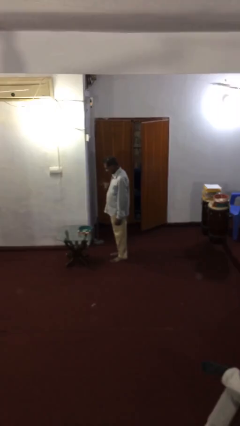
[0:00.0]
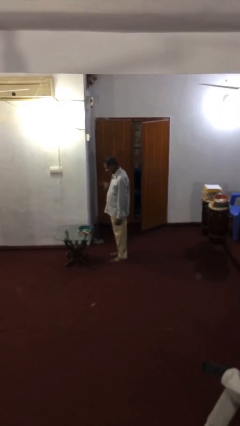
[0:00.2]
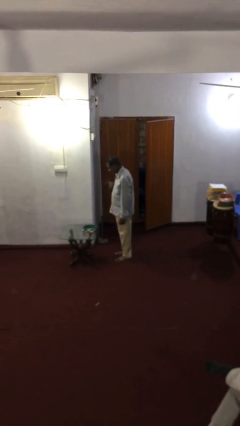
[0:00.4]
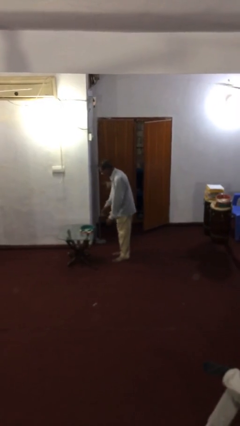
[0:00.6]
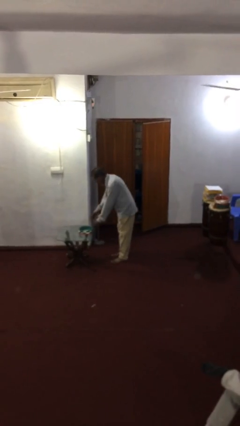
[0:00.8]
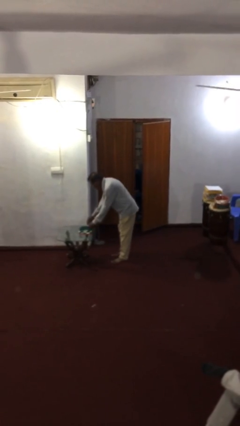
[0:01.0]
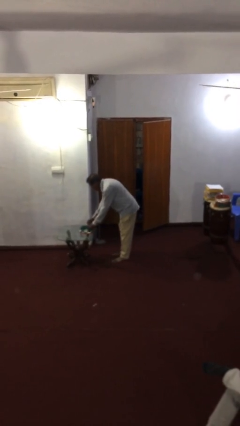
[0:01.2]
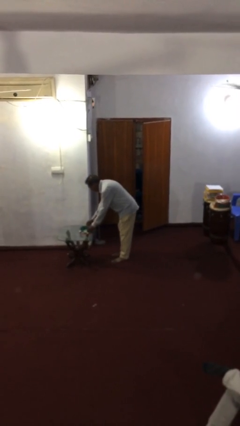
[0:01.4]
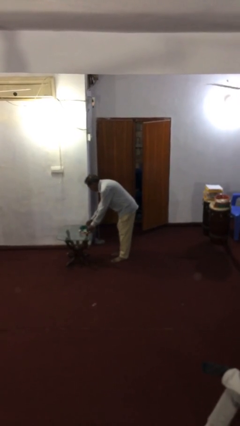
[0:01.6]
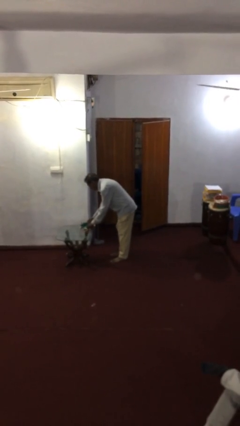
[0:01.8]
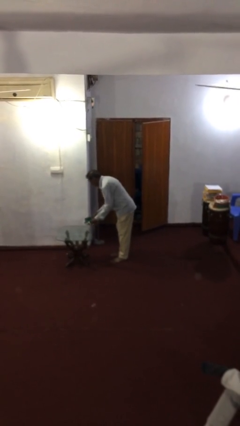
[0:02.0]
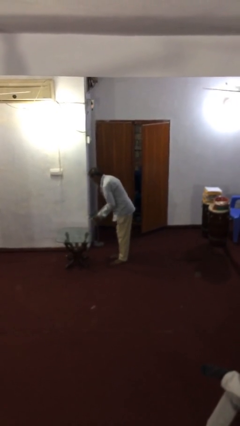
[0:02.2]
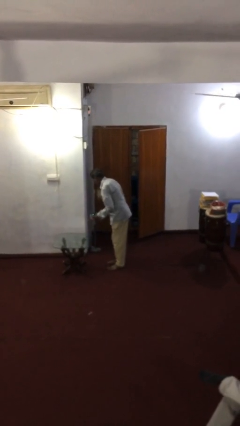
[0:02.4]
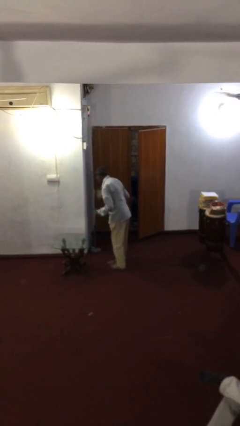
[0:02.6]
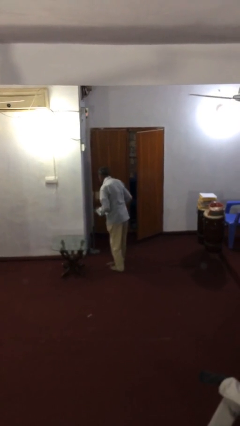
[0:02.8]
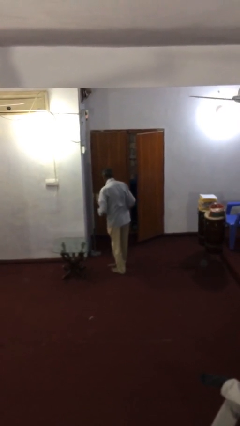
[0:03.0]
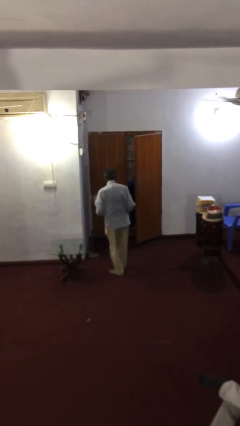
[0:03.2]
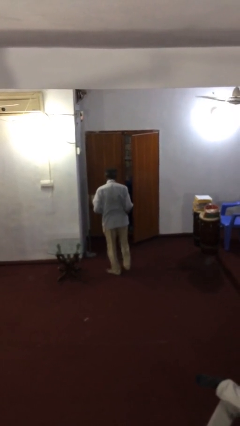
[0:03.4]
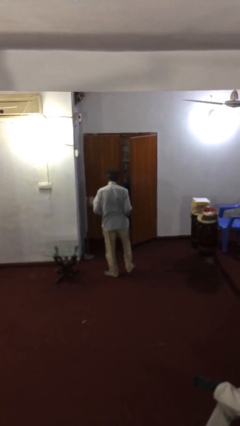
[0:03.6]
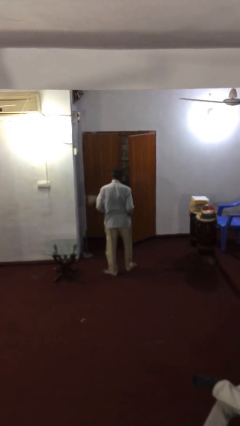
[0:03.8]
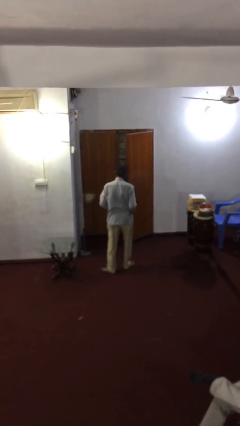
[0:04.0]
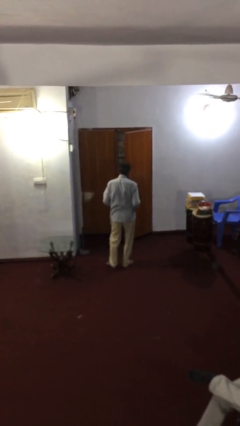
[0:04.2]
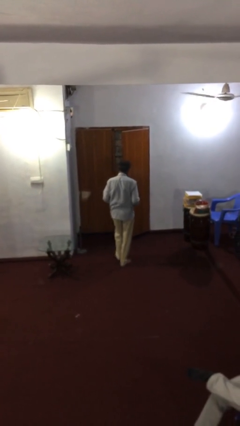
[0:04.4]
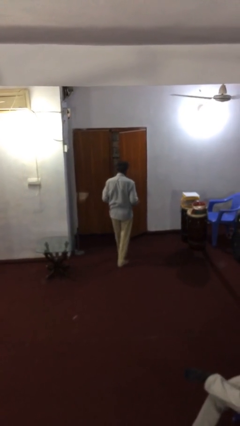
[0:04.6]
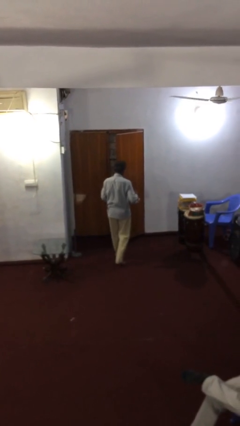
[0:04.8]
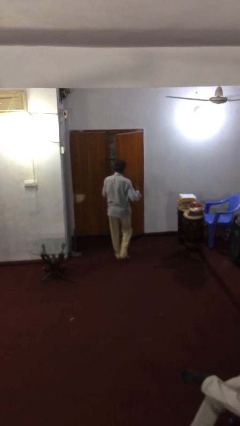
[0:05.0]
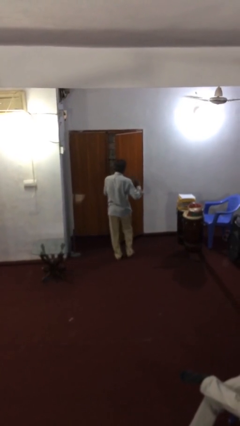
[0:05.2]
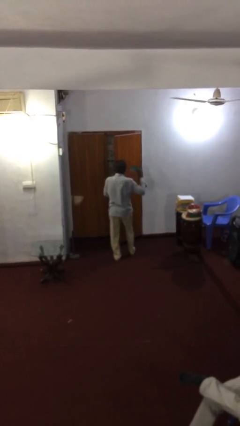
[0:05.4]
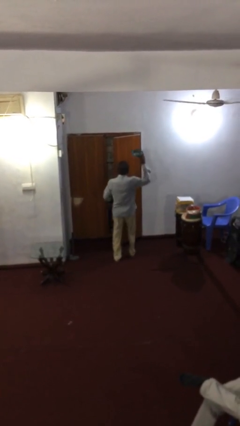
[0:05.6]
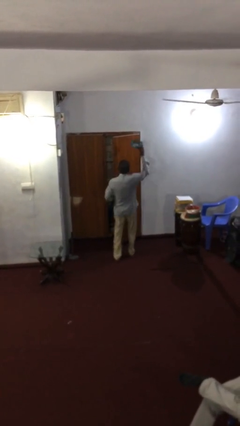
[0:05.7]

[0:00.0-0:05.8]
person picks up object from table

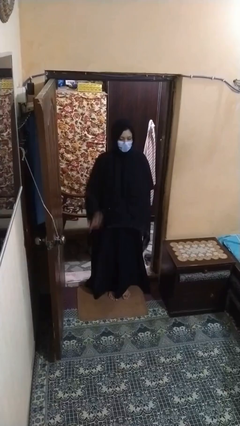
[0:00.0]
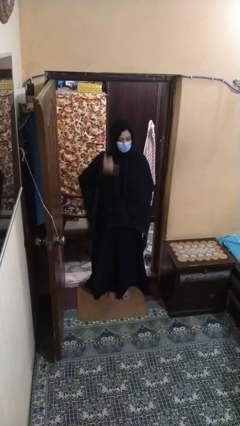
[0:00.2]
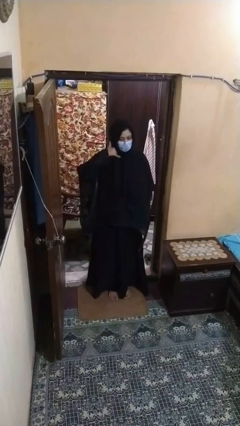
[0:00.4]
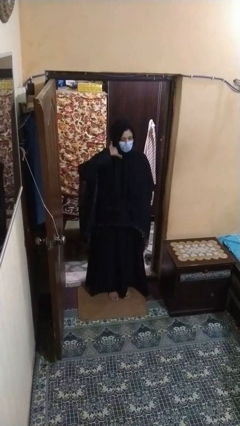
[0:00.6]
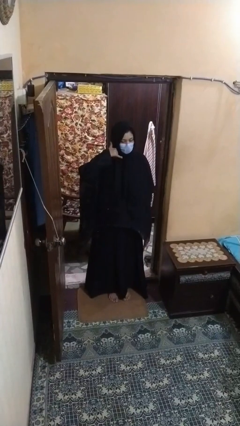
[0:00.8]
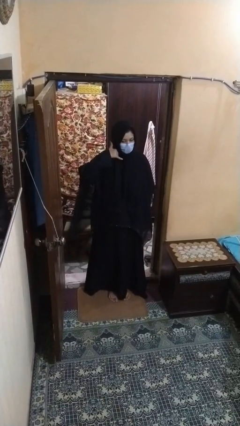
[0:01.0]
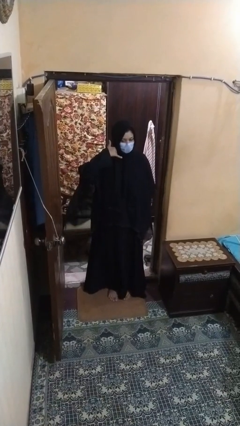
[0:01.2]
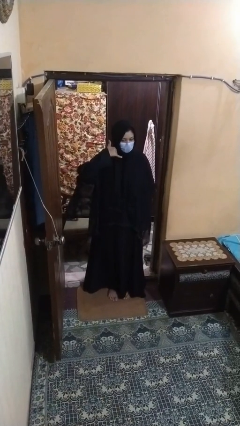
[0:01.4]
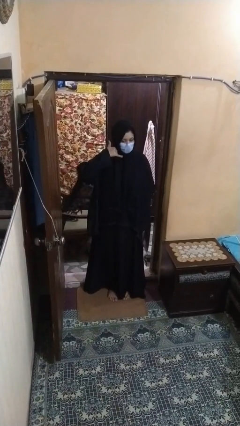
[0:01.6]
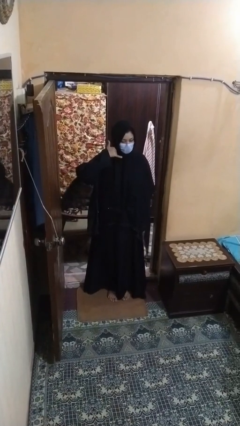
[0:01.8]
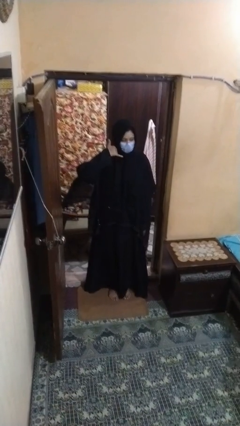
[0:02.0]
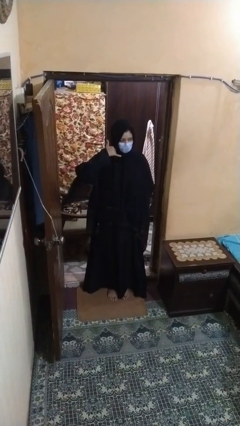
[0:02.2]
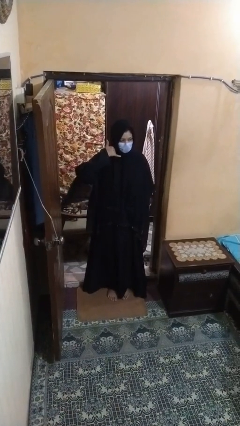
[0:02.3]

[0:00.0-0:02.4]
person gestures call me

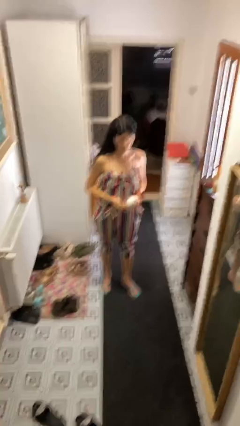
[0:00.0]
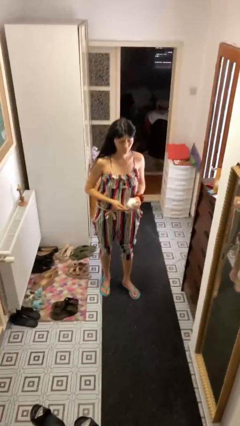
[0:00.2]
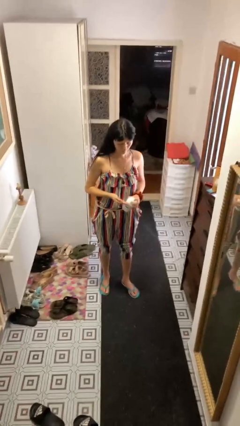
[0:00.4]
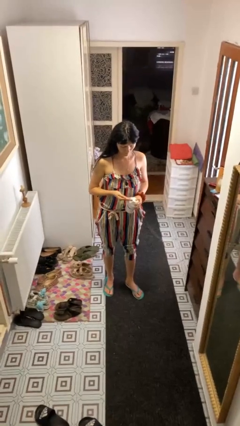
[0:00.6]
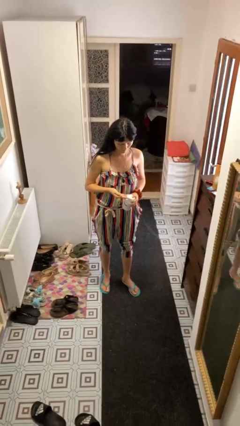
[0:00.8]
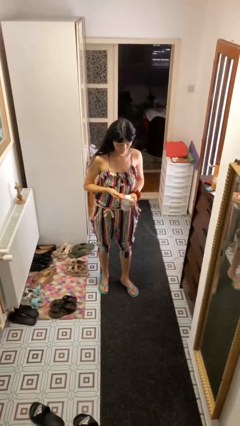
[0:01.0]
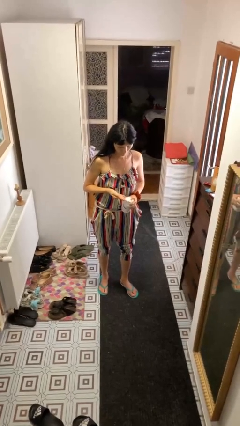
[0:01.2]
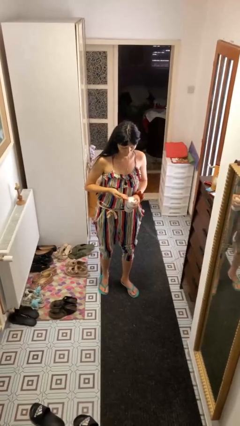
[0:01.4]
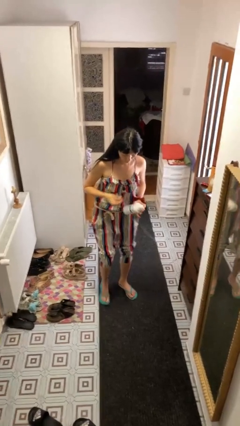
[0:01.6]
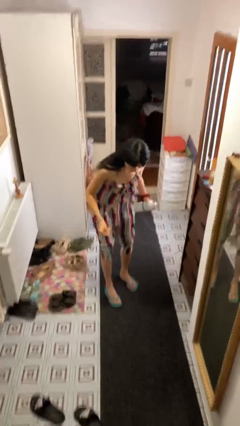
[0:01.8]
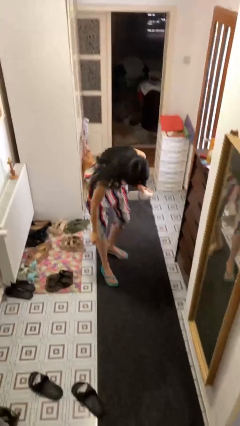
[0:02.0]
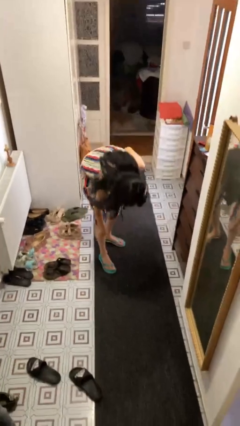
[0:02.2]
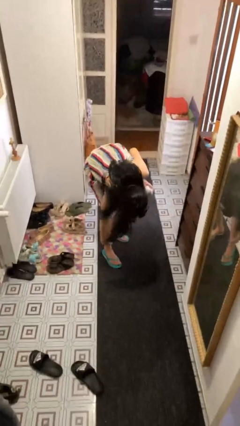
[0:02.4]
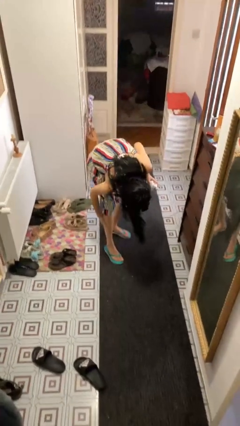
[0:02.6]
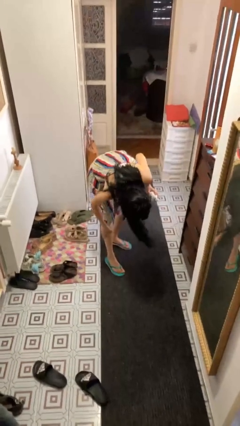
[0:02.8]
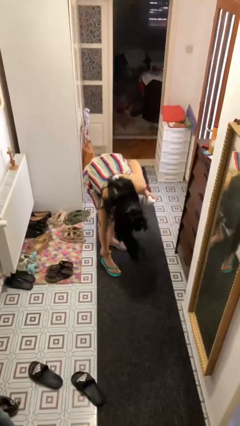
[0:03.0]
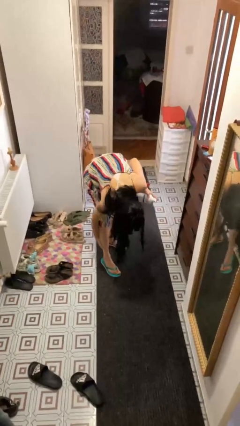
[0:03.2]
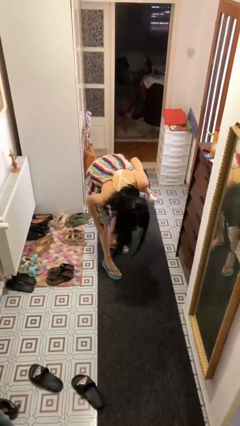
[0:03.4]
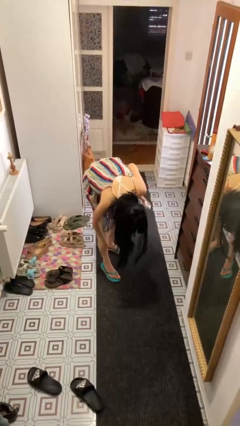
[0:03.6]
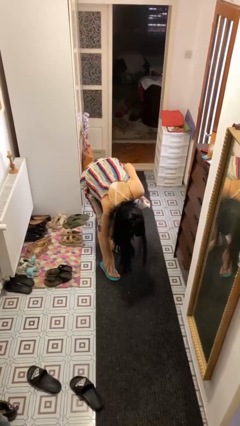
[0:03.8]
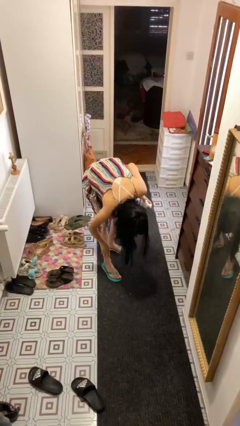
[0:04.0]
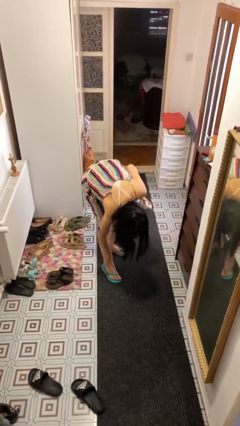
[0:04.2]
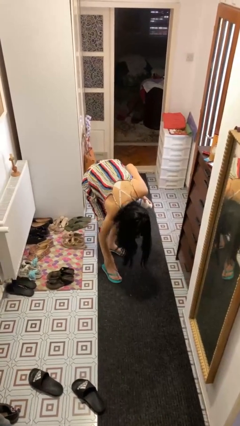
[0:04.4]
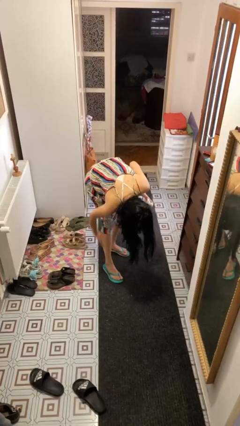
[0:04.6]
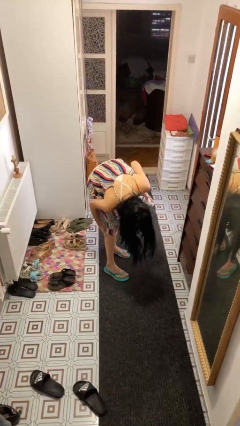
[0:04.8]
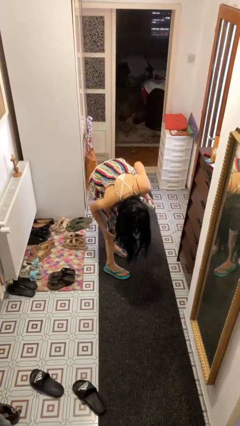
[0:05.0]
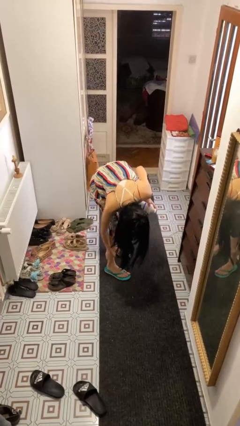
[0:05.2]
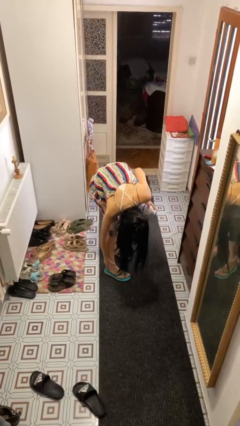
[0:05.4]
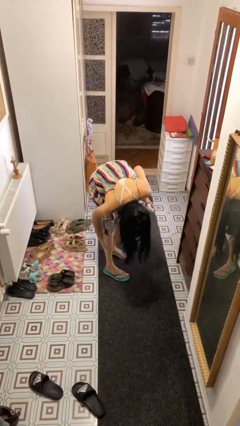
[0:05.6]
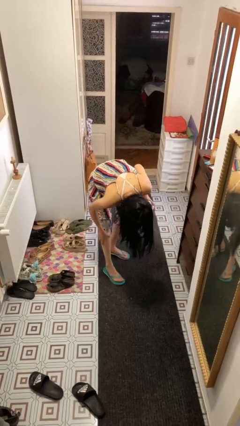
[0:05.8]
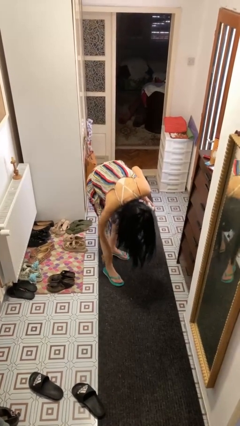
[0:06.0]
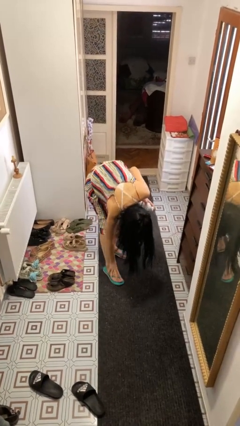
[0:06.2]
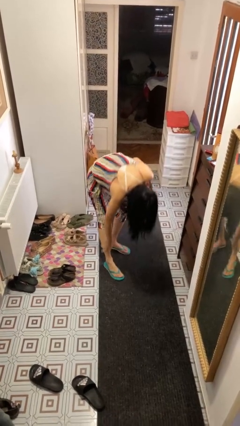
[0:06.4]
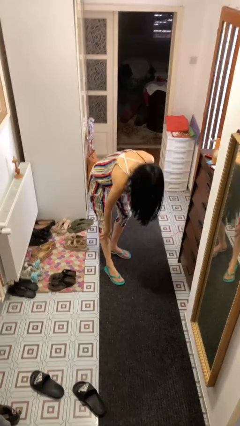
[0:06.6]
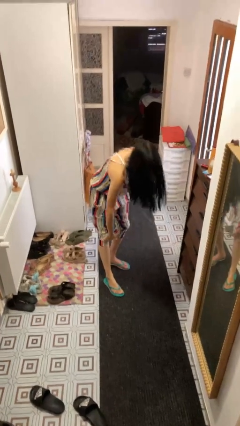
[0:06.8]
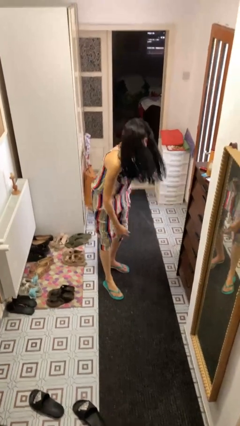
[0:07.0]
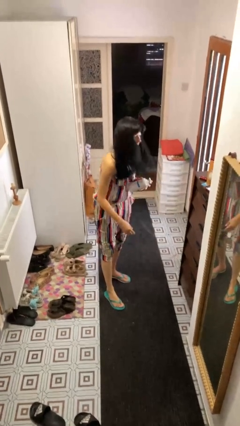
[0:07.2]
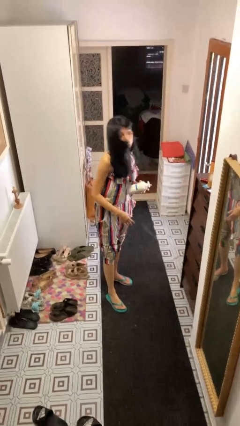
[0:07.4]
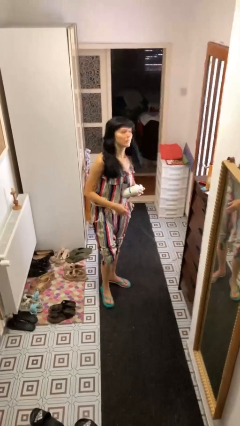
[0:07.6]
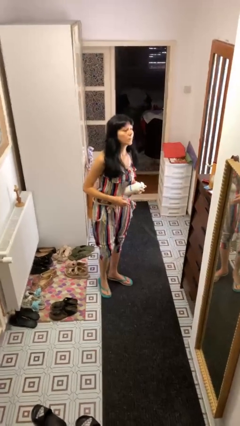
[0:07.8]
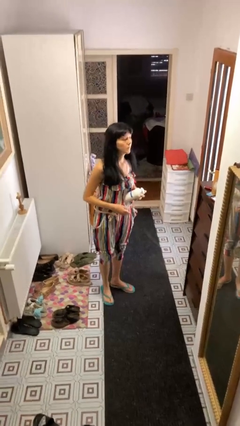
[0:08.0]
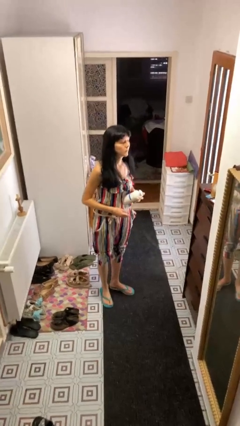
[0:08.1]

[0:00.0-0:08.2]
person applies sunscreen

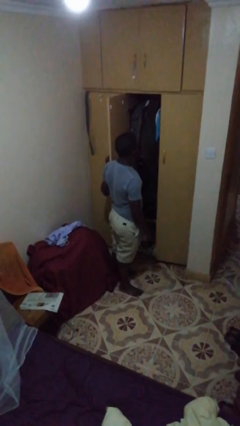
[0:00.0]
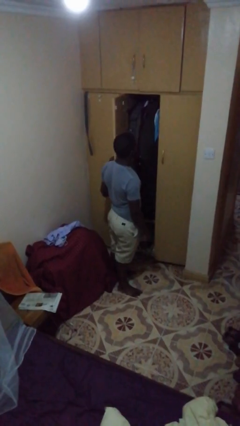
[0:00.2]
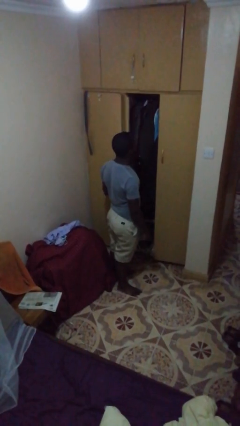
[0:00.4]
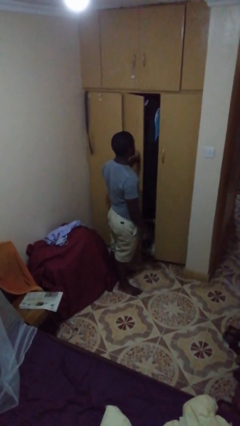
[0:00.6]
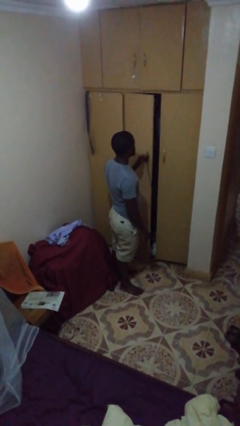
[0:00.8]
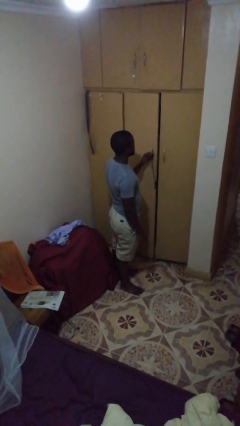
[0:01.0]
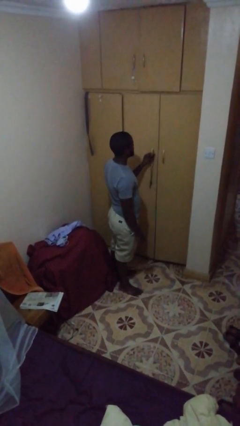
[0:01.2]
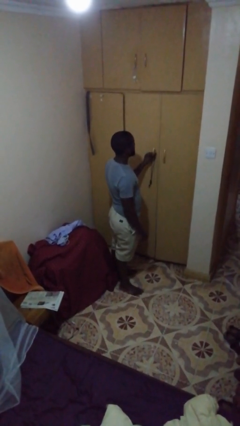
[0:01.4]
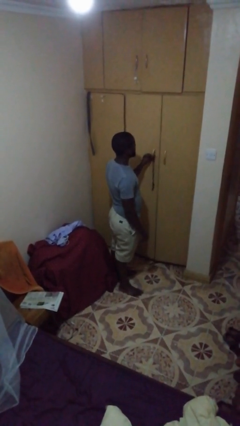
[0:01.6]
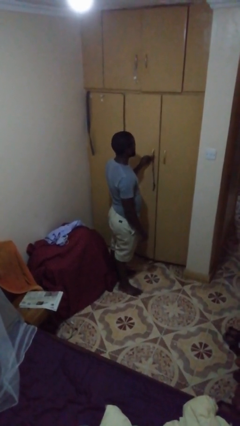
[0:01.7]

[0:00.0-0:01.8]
person closes closet door

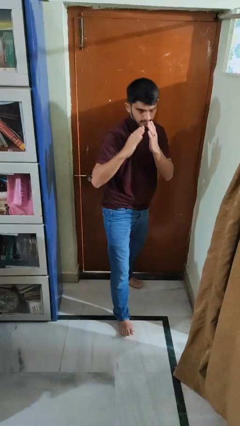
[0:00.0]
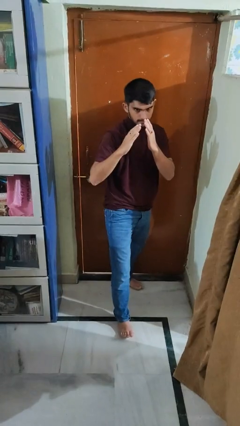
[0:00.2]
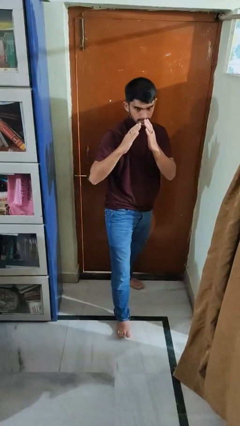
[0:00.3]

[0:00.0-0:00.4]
person karate kicks
